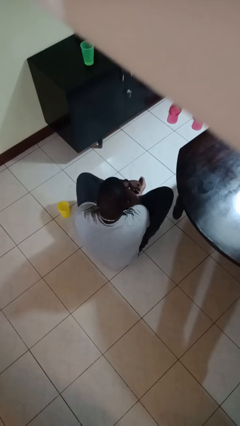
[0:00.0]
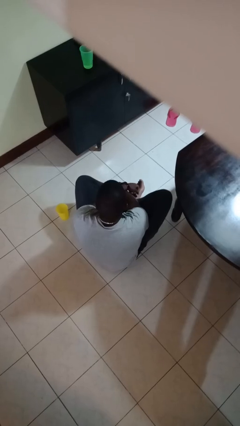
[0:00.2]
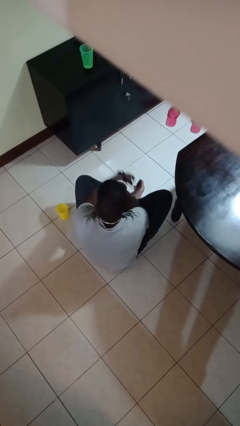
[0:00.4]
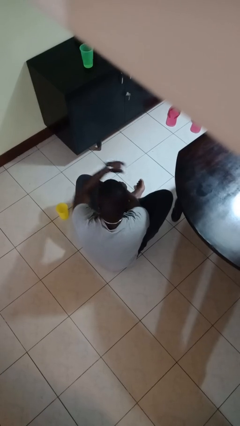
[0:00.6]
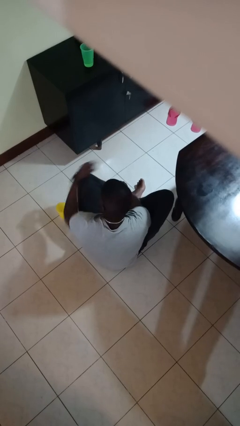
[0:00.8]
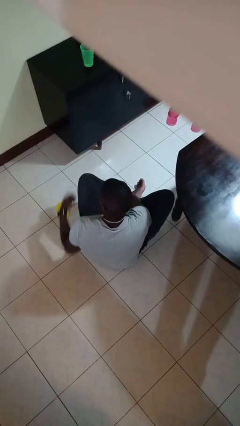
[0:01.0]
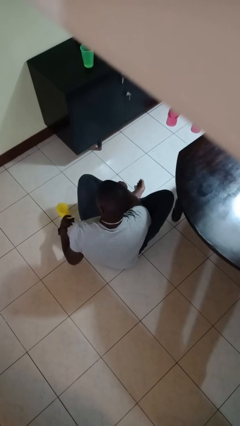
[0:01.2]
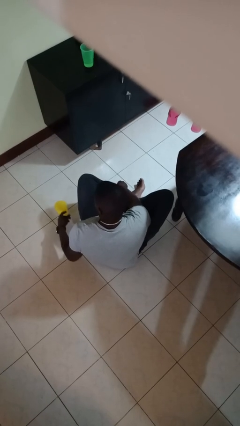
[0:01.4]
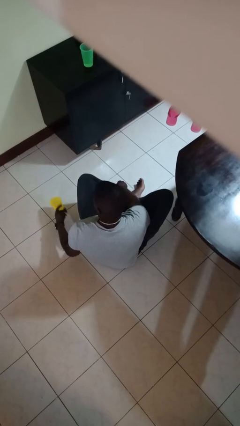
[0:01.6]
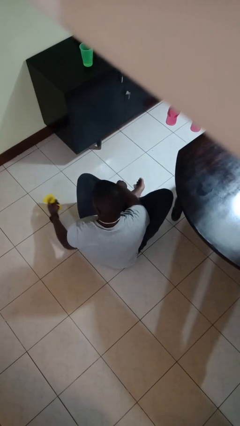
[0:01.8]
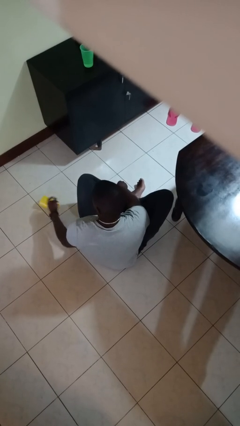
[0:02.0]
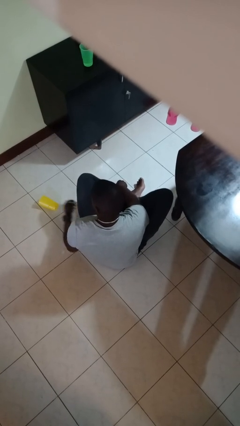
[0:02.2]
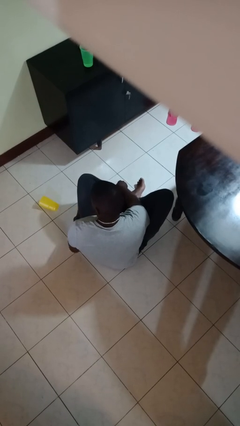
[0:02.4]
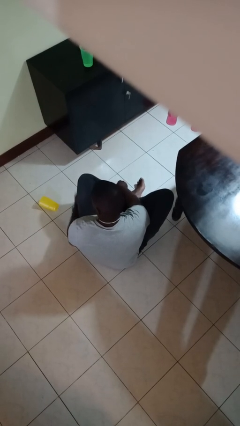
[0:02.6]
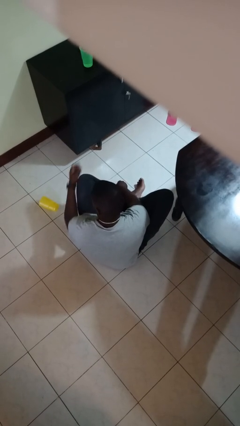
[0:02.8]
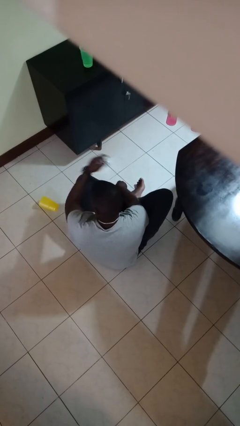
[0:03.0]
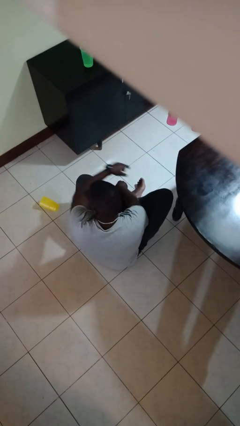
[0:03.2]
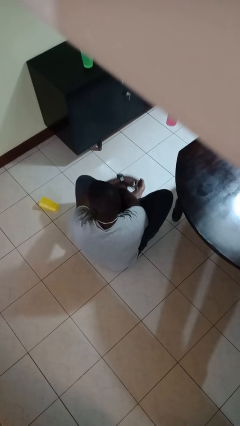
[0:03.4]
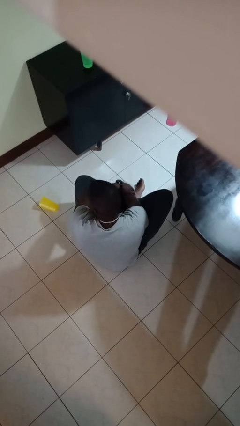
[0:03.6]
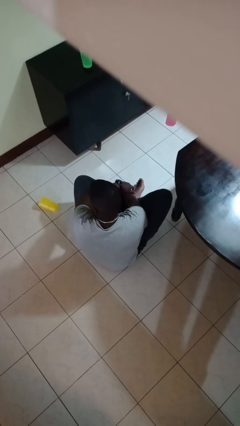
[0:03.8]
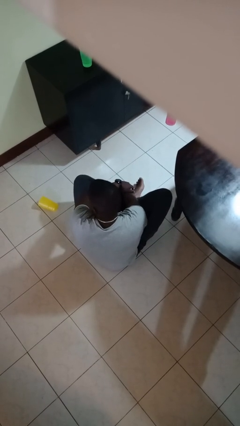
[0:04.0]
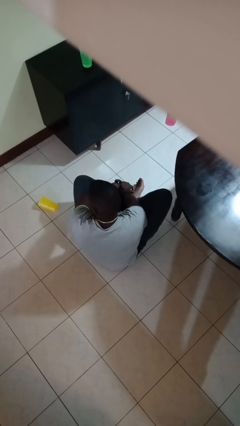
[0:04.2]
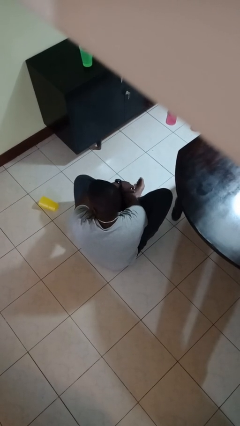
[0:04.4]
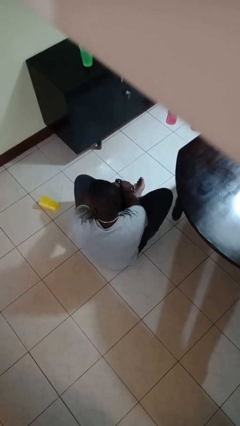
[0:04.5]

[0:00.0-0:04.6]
person spills on floor

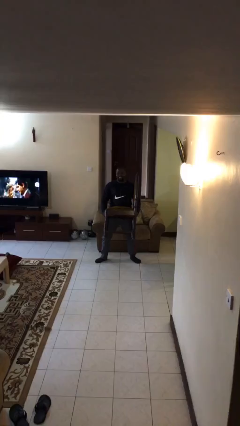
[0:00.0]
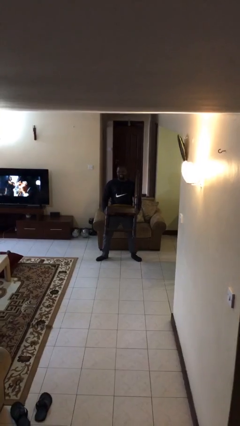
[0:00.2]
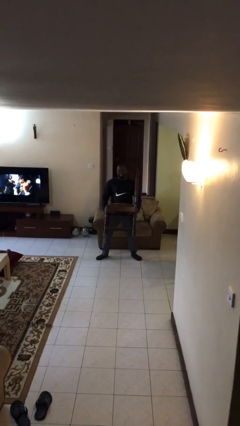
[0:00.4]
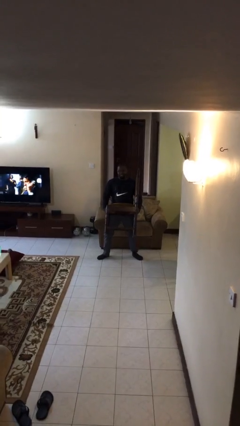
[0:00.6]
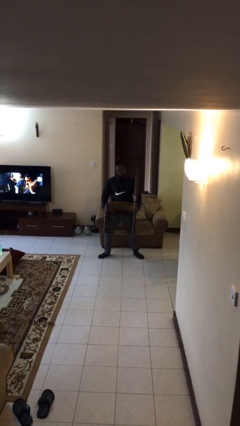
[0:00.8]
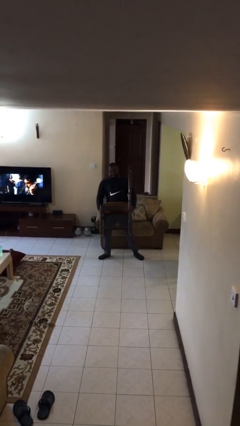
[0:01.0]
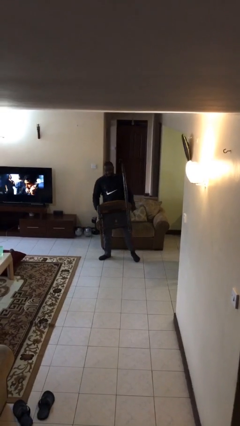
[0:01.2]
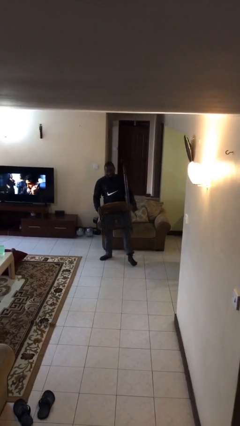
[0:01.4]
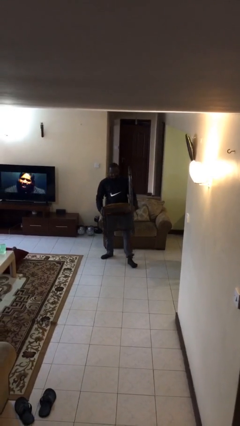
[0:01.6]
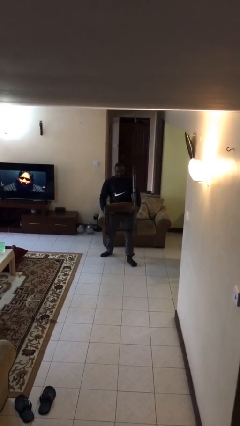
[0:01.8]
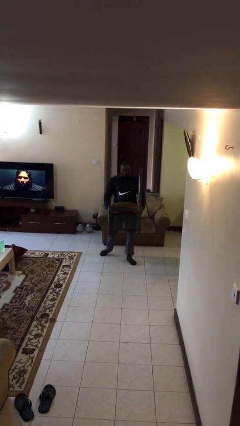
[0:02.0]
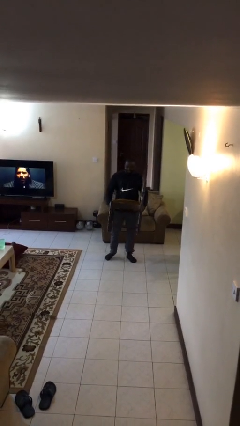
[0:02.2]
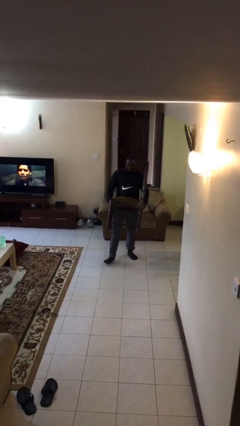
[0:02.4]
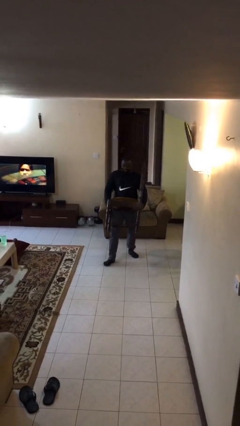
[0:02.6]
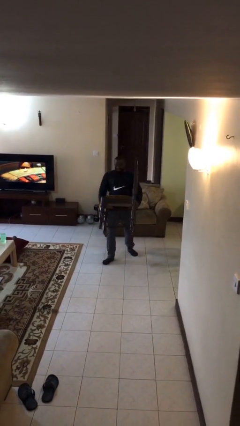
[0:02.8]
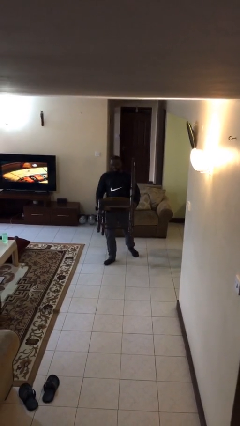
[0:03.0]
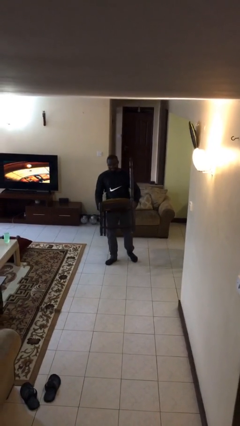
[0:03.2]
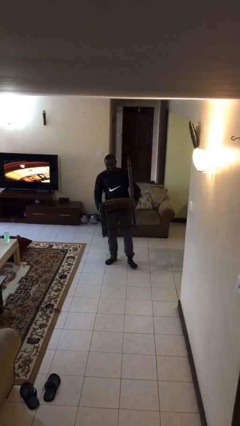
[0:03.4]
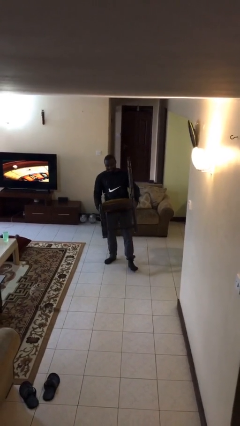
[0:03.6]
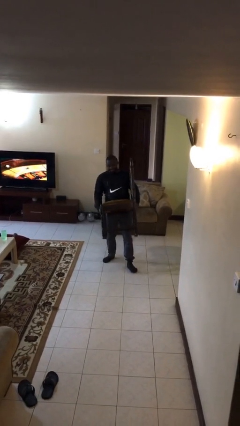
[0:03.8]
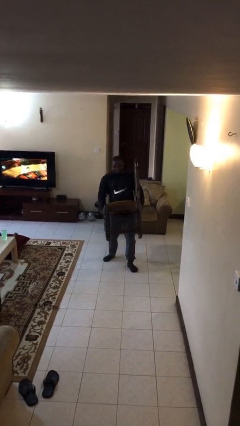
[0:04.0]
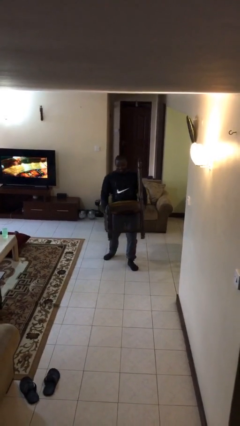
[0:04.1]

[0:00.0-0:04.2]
person carries heavy object

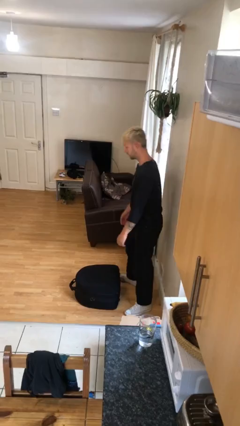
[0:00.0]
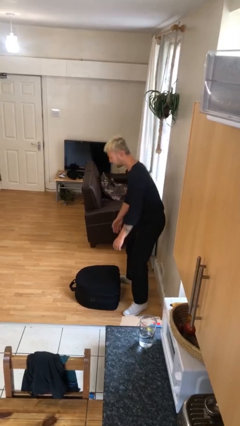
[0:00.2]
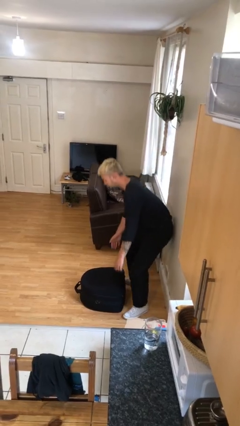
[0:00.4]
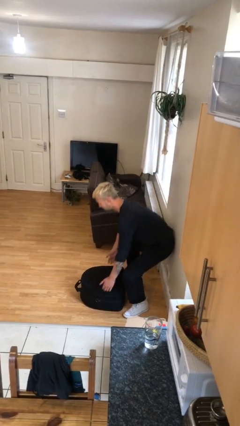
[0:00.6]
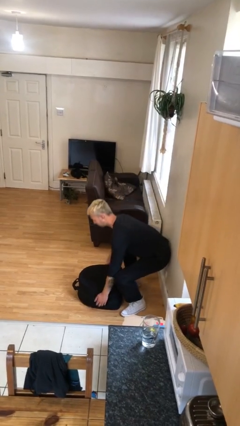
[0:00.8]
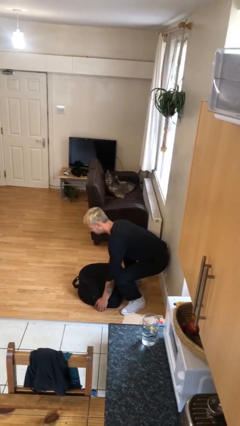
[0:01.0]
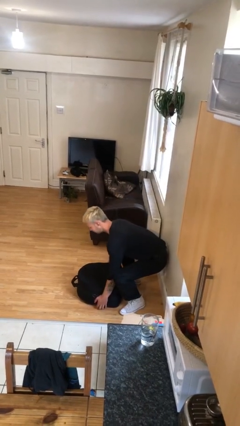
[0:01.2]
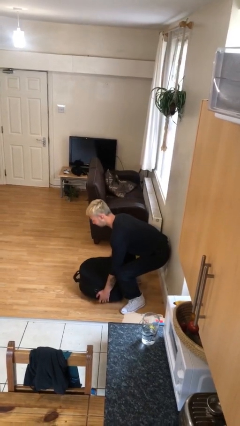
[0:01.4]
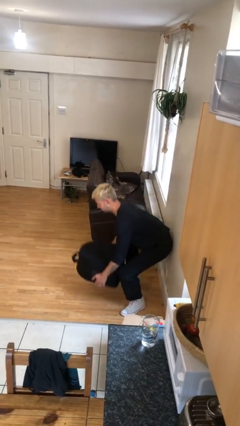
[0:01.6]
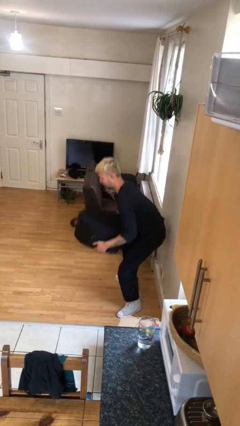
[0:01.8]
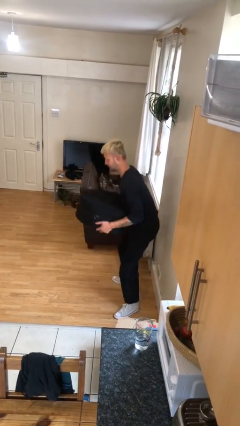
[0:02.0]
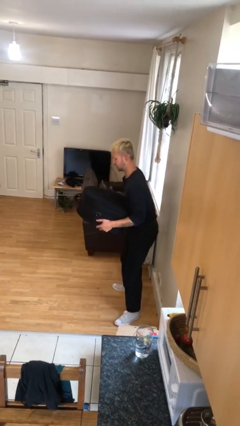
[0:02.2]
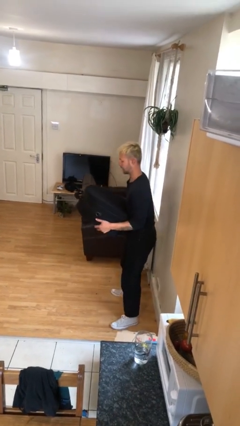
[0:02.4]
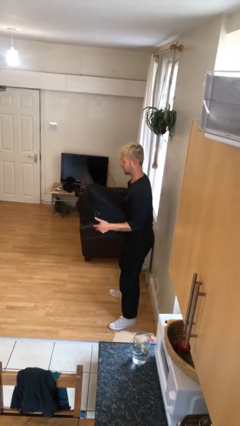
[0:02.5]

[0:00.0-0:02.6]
person picks up object from floor

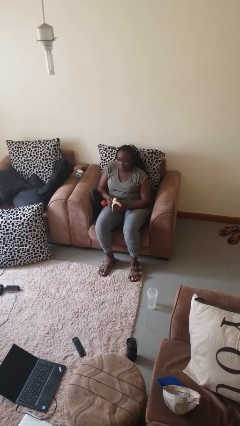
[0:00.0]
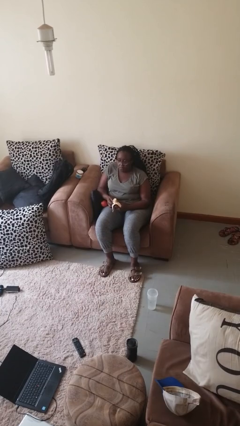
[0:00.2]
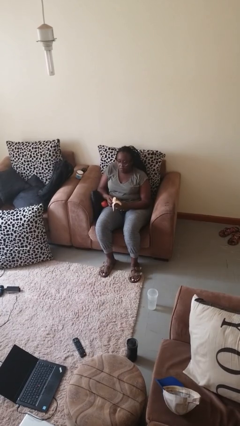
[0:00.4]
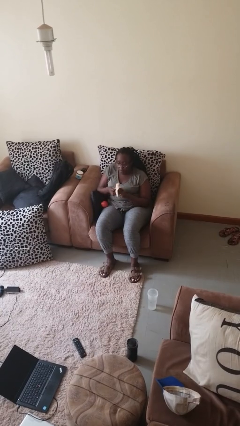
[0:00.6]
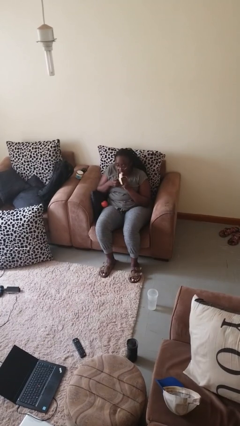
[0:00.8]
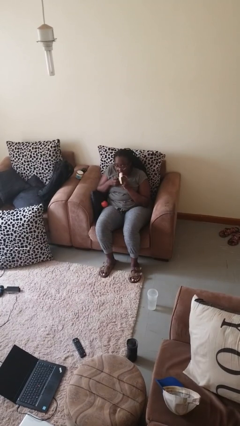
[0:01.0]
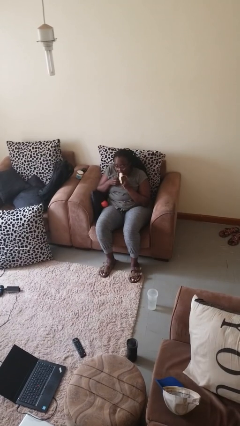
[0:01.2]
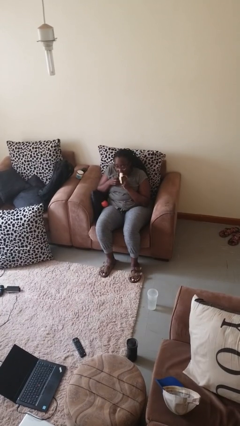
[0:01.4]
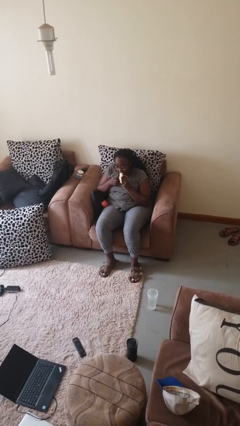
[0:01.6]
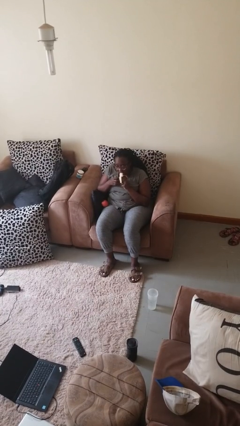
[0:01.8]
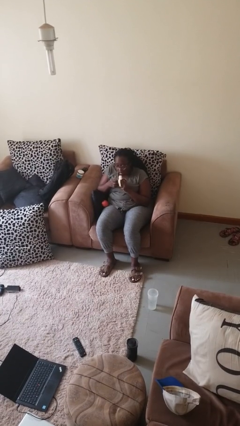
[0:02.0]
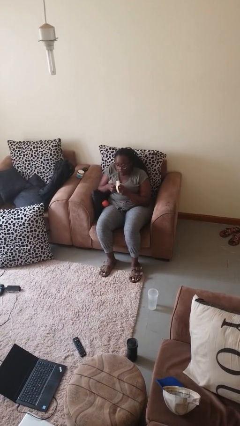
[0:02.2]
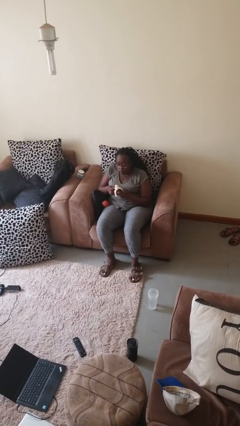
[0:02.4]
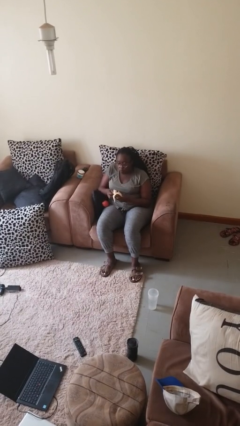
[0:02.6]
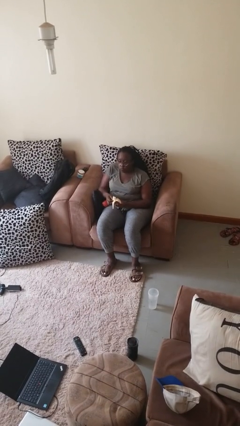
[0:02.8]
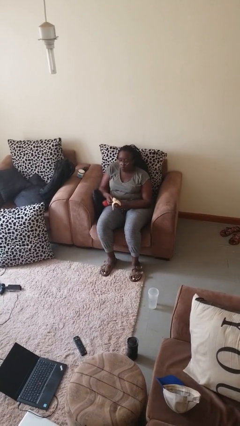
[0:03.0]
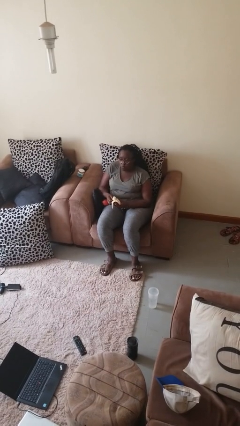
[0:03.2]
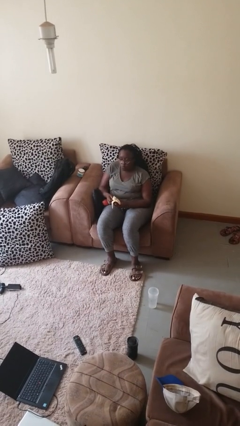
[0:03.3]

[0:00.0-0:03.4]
person eats banana

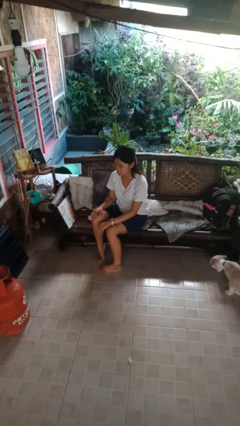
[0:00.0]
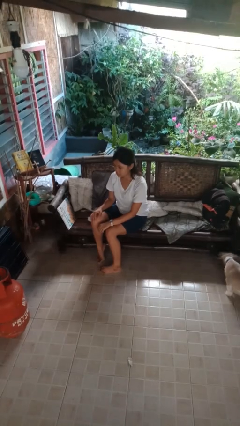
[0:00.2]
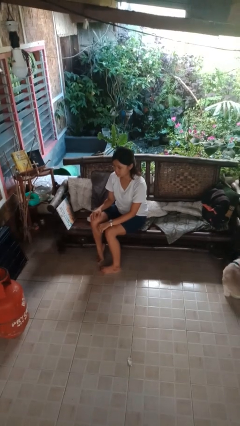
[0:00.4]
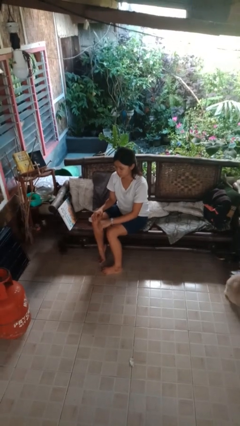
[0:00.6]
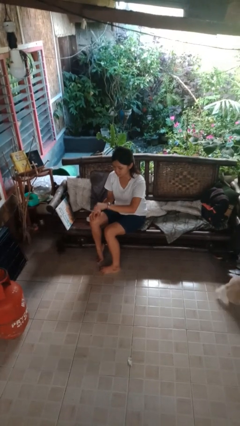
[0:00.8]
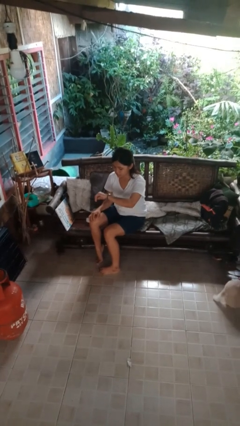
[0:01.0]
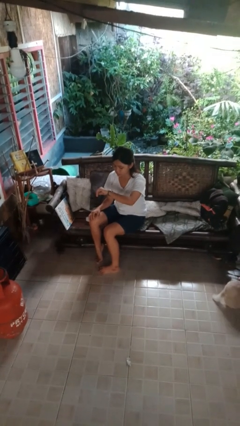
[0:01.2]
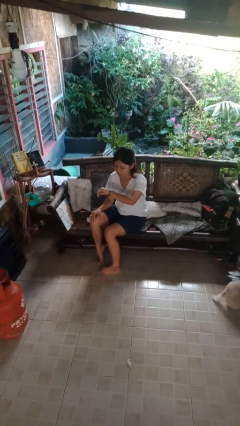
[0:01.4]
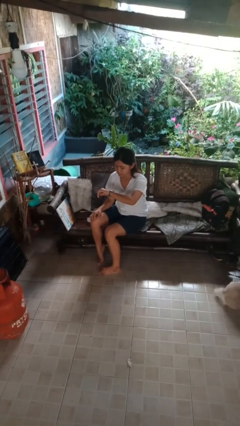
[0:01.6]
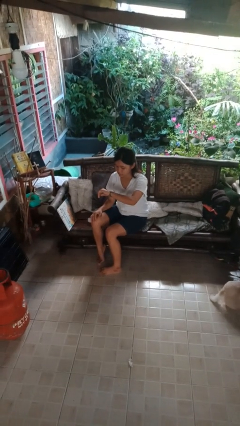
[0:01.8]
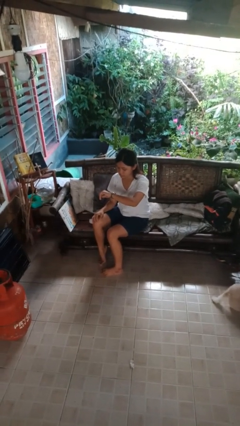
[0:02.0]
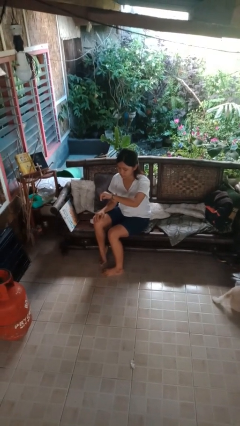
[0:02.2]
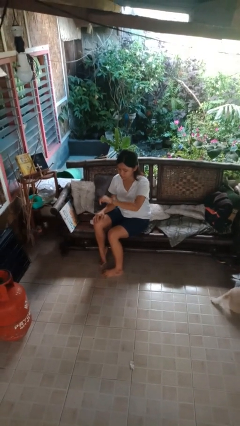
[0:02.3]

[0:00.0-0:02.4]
person looks at wristwatch

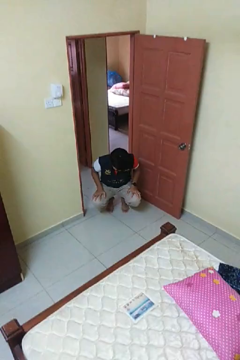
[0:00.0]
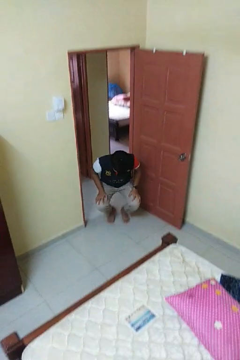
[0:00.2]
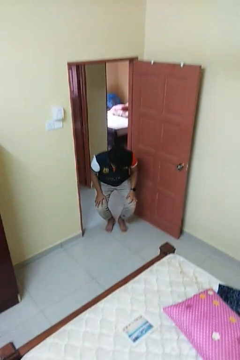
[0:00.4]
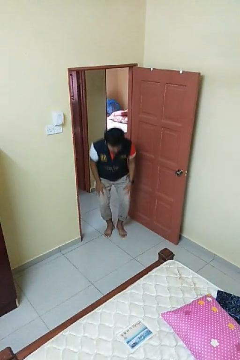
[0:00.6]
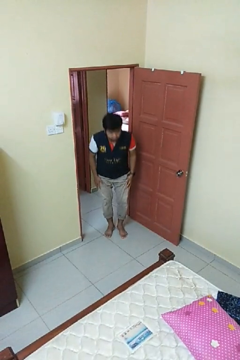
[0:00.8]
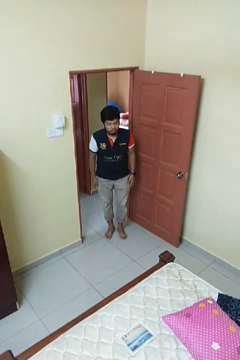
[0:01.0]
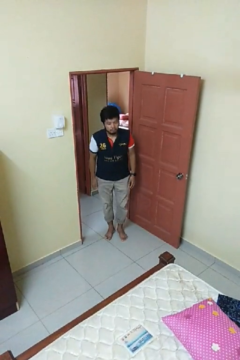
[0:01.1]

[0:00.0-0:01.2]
person stands up
